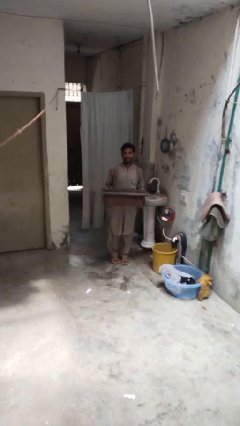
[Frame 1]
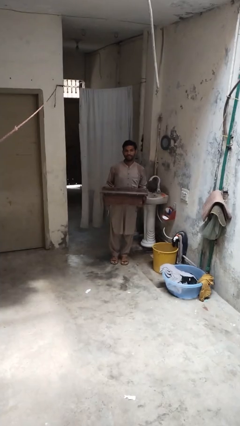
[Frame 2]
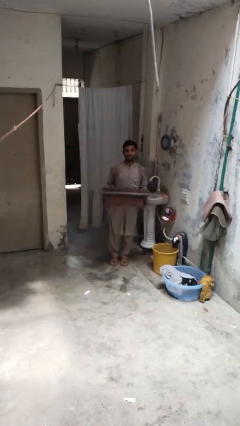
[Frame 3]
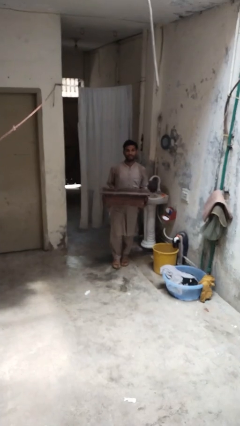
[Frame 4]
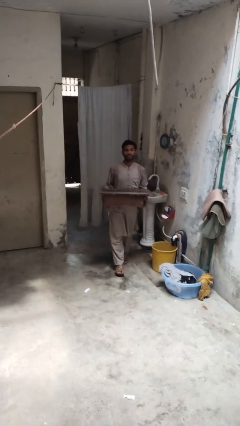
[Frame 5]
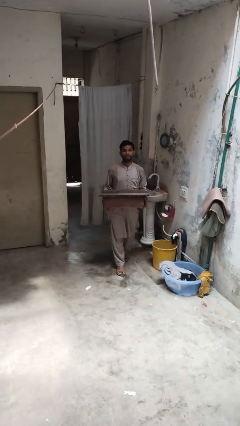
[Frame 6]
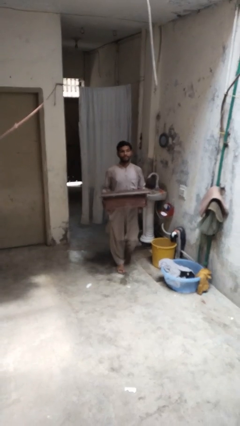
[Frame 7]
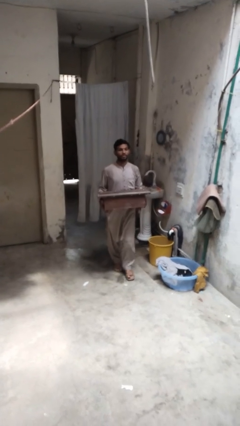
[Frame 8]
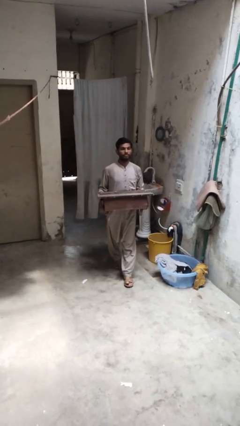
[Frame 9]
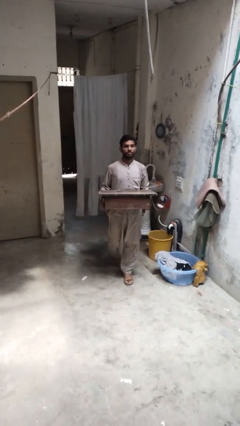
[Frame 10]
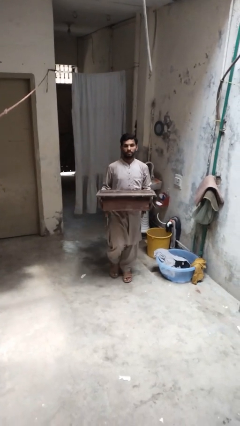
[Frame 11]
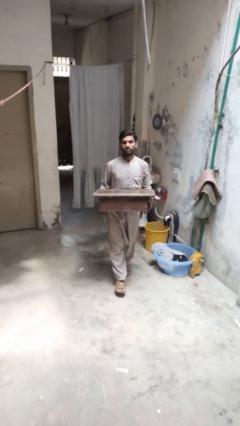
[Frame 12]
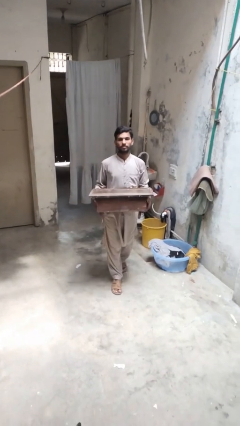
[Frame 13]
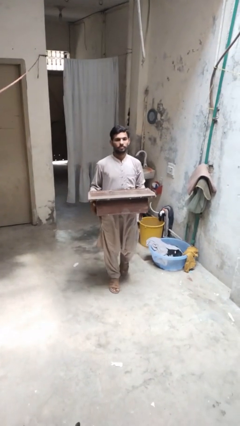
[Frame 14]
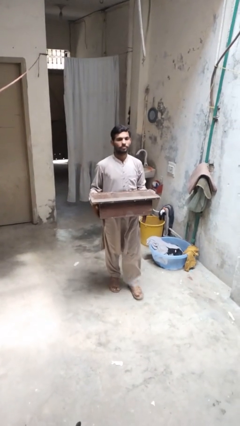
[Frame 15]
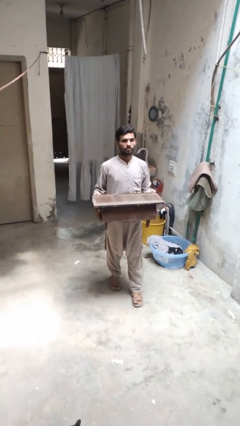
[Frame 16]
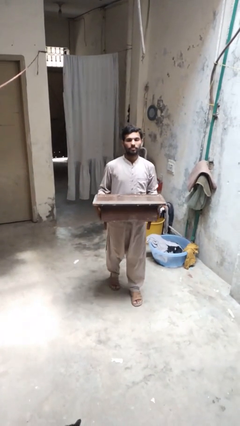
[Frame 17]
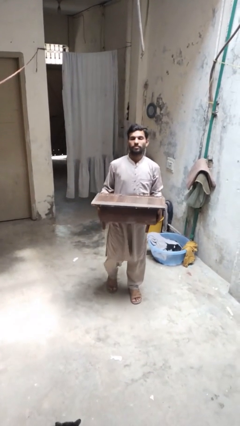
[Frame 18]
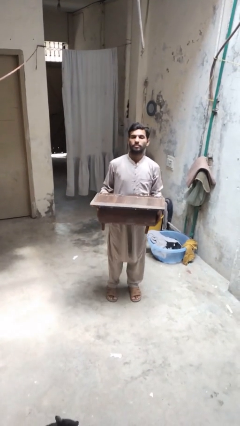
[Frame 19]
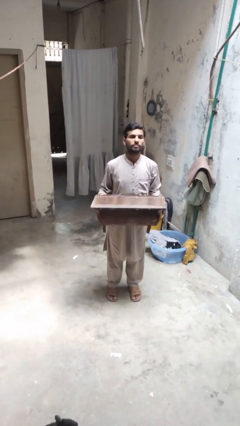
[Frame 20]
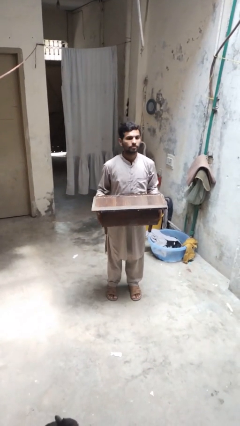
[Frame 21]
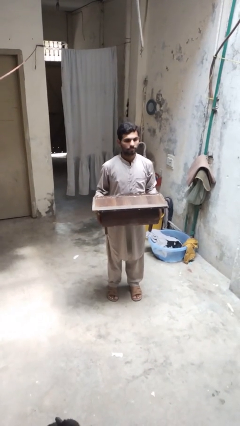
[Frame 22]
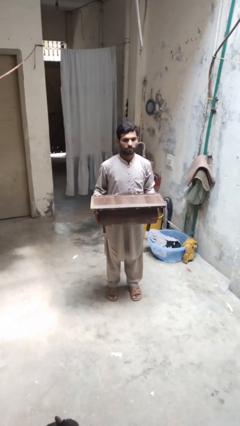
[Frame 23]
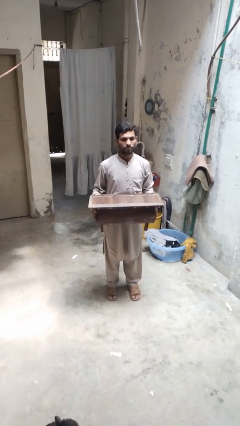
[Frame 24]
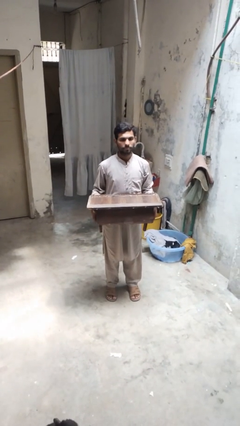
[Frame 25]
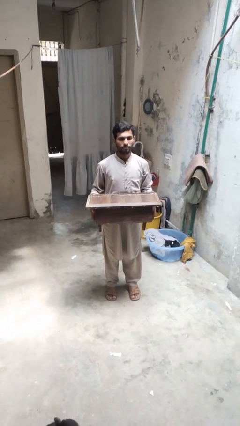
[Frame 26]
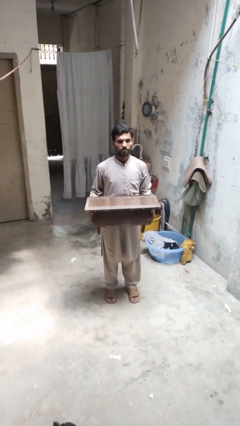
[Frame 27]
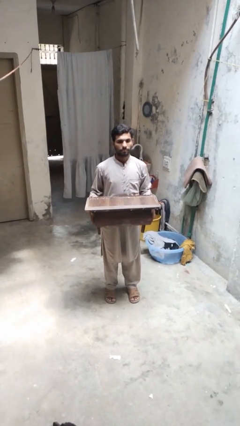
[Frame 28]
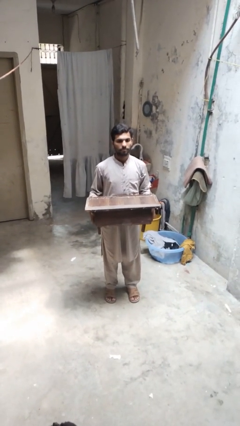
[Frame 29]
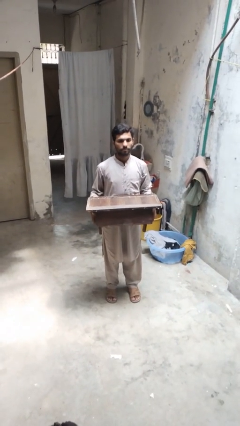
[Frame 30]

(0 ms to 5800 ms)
person carries furniture

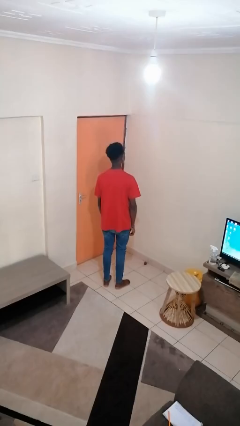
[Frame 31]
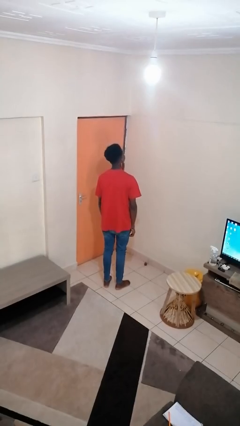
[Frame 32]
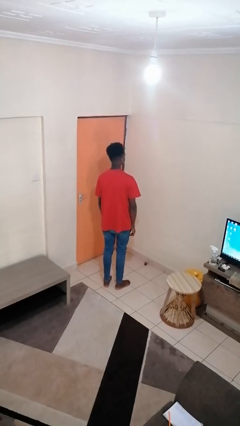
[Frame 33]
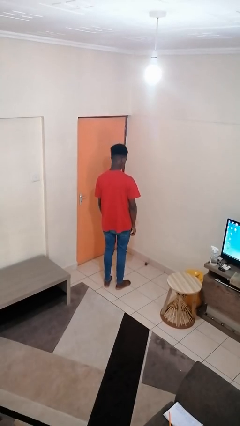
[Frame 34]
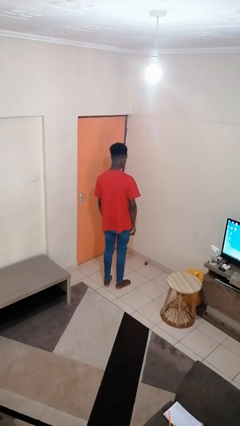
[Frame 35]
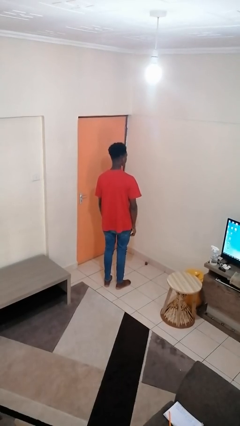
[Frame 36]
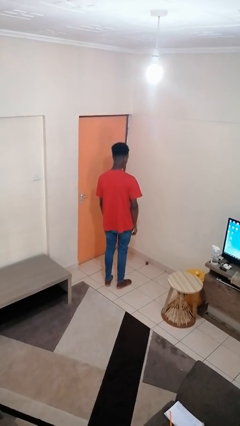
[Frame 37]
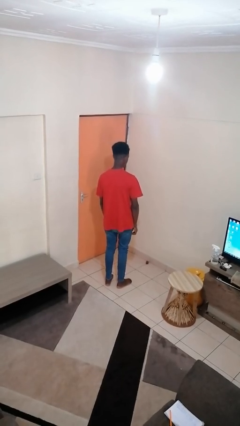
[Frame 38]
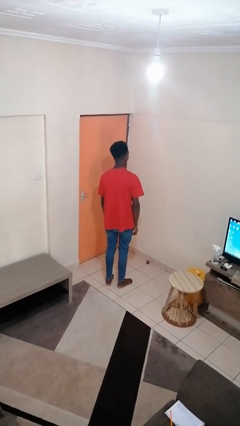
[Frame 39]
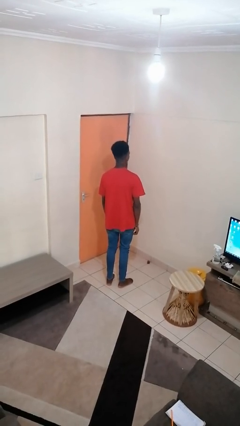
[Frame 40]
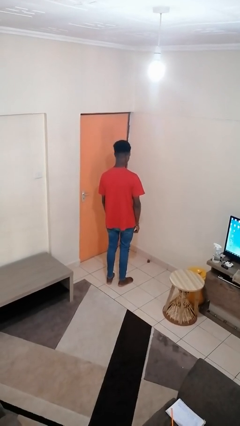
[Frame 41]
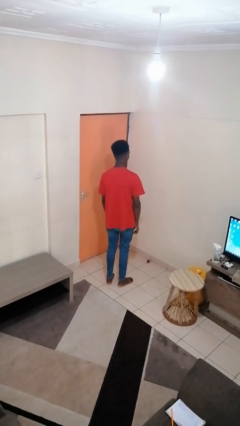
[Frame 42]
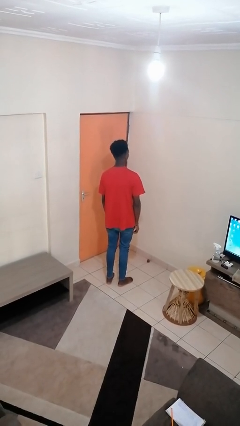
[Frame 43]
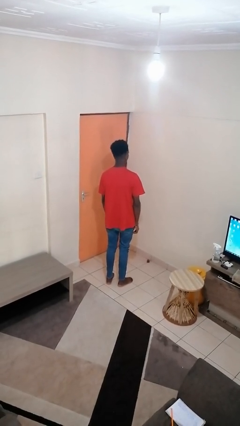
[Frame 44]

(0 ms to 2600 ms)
person nods head

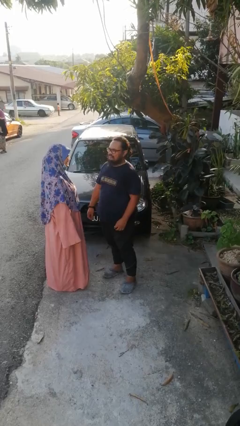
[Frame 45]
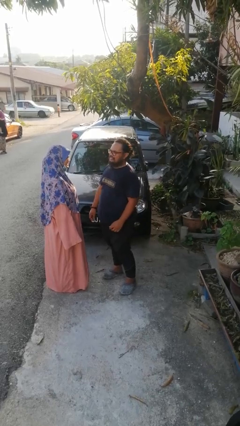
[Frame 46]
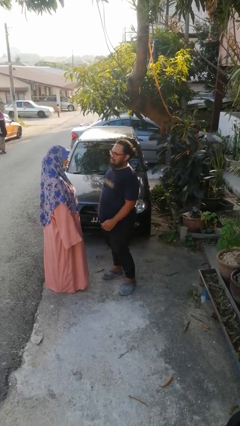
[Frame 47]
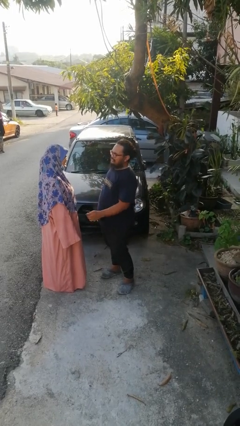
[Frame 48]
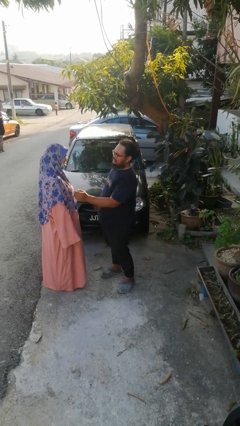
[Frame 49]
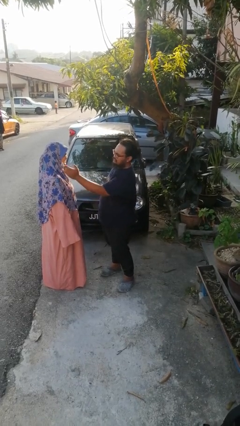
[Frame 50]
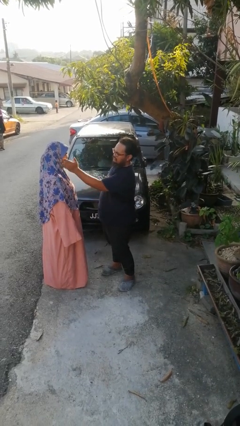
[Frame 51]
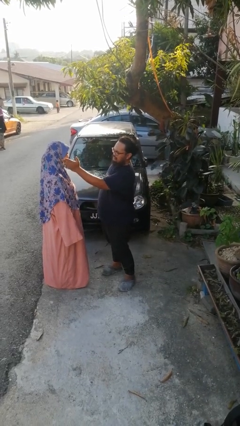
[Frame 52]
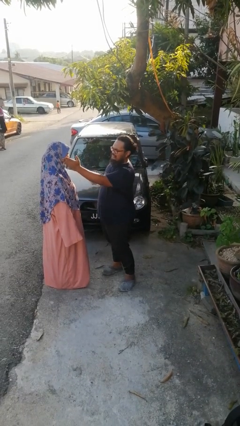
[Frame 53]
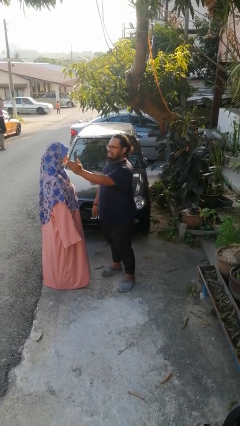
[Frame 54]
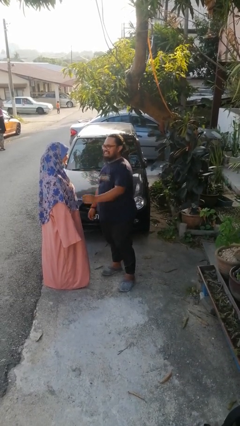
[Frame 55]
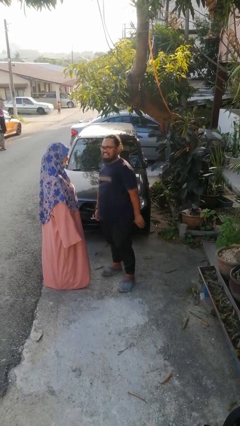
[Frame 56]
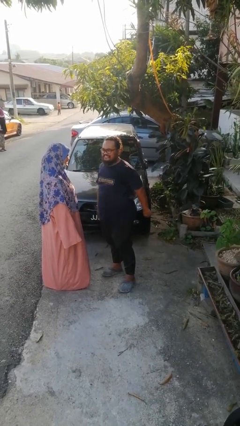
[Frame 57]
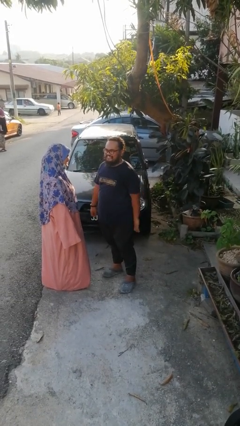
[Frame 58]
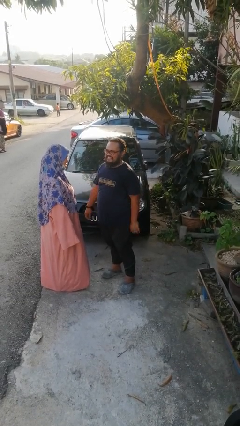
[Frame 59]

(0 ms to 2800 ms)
person touches face of person

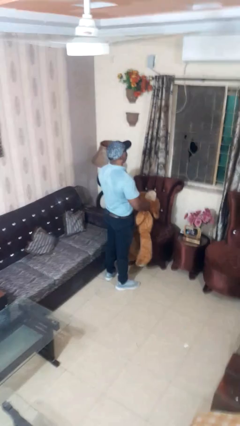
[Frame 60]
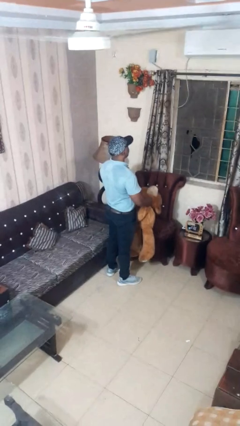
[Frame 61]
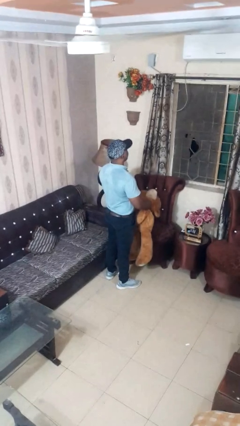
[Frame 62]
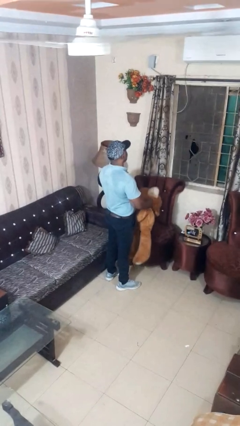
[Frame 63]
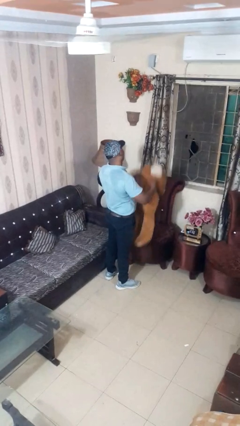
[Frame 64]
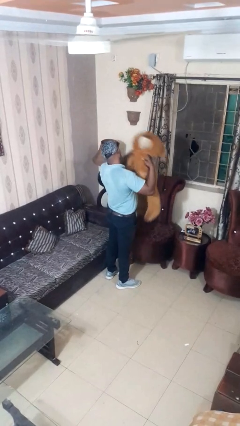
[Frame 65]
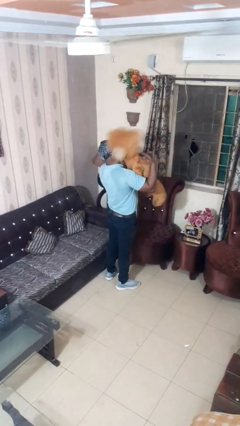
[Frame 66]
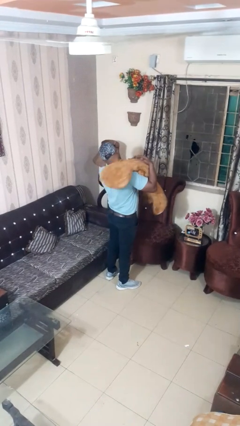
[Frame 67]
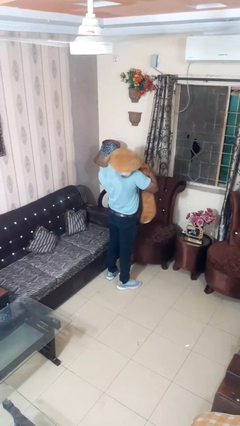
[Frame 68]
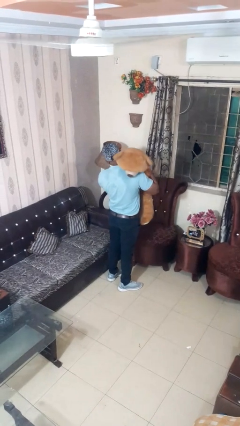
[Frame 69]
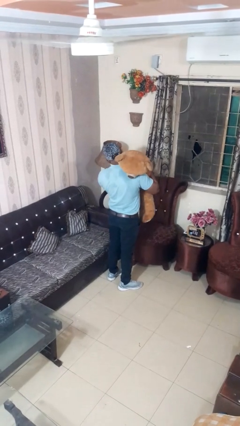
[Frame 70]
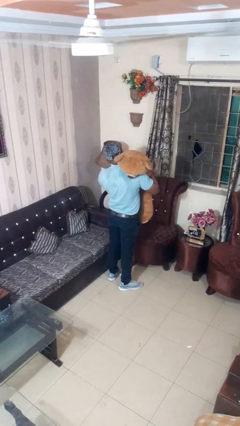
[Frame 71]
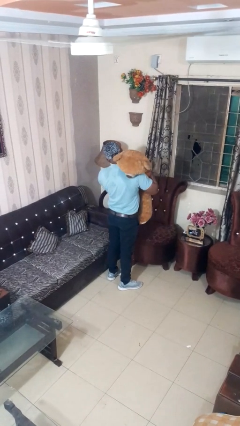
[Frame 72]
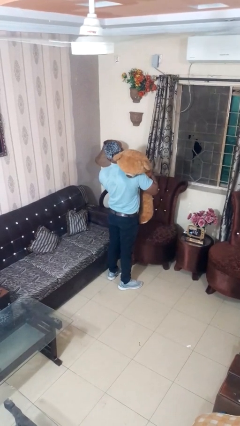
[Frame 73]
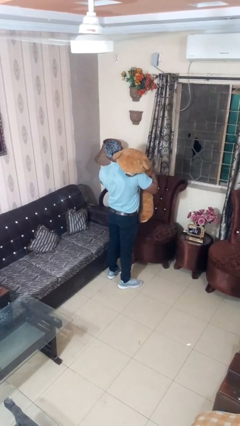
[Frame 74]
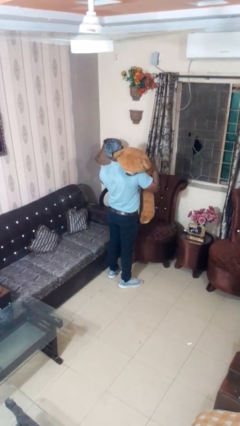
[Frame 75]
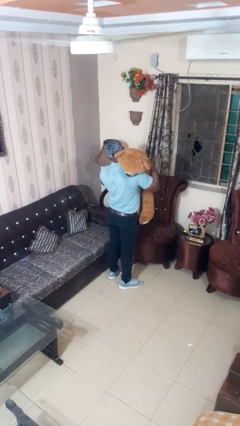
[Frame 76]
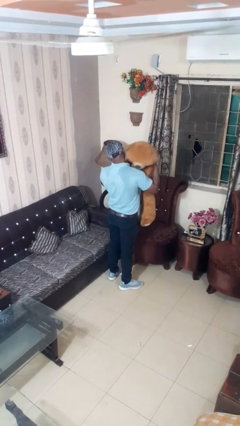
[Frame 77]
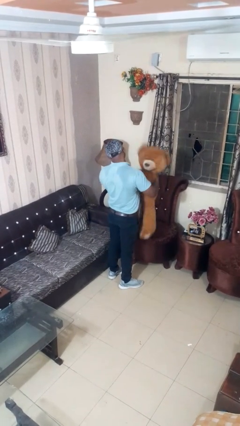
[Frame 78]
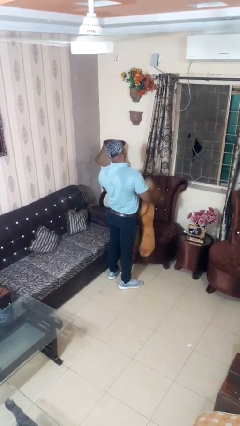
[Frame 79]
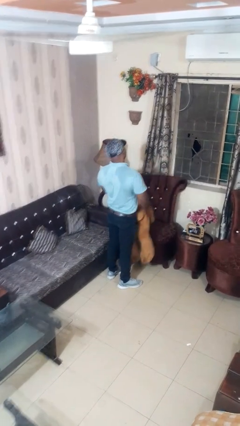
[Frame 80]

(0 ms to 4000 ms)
person hugs stuffed animal

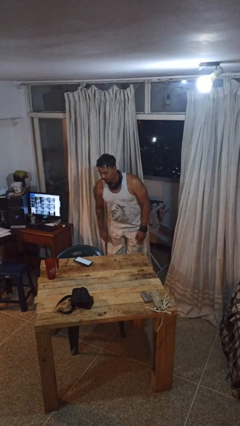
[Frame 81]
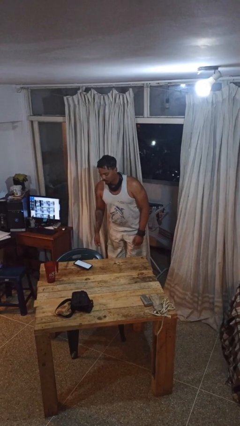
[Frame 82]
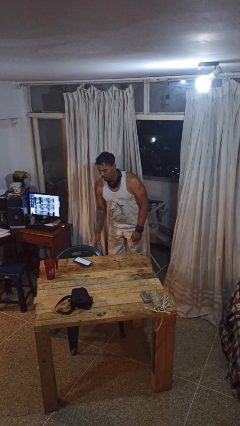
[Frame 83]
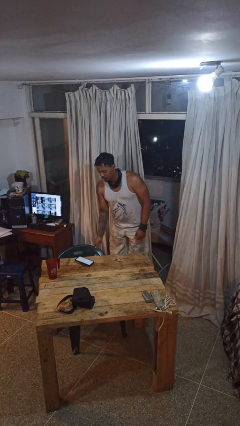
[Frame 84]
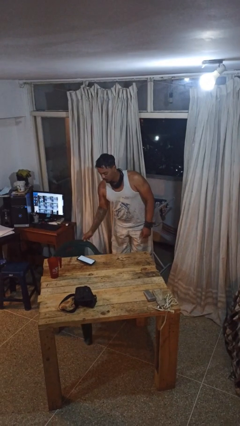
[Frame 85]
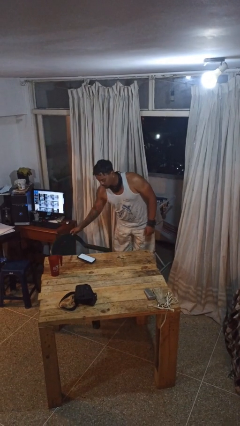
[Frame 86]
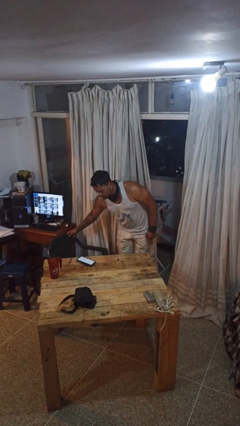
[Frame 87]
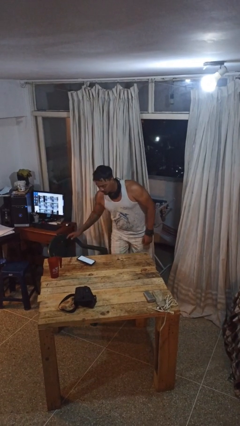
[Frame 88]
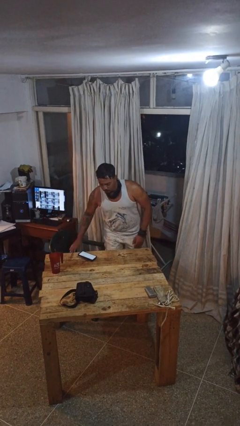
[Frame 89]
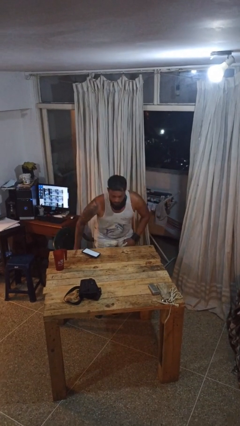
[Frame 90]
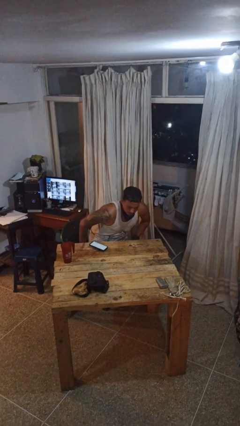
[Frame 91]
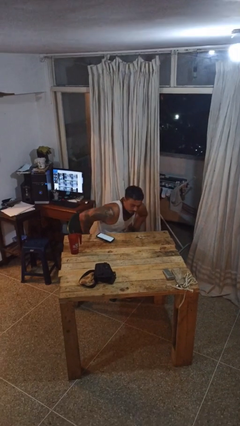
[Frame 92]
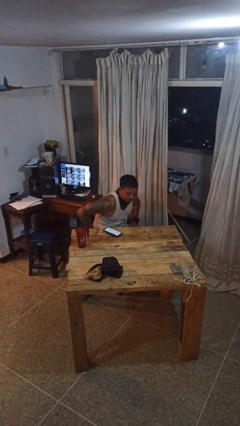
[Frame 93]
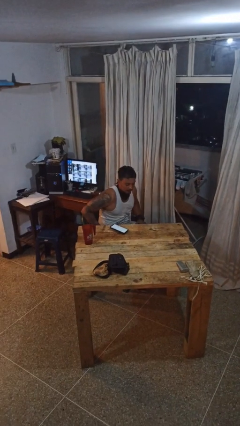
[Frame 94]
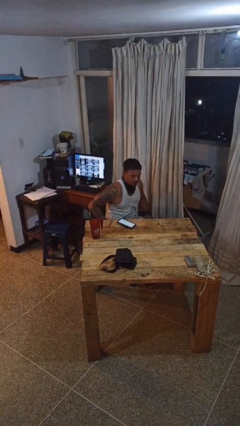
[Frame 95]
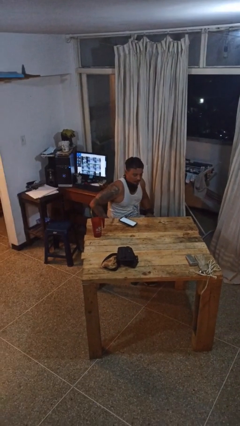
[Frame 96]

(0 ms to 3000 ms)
person sits down
